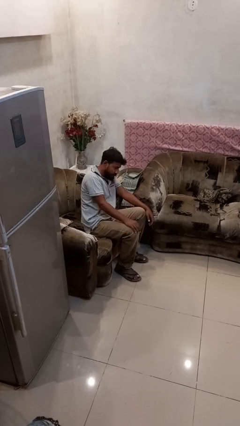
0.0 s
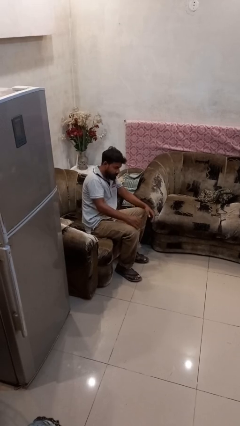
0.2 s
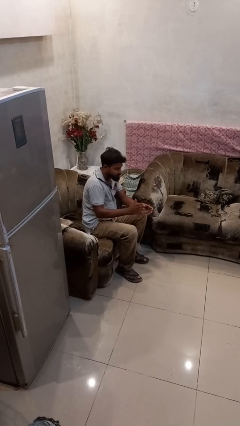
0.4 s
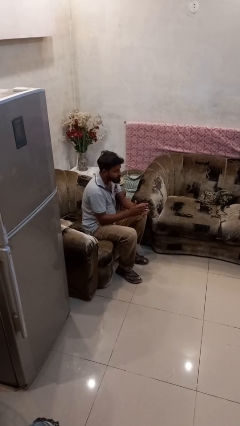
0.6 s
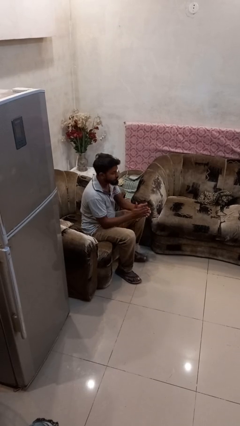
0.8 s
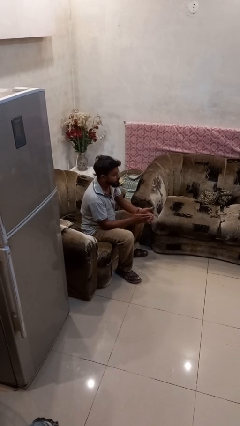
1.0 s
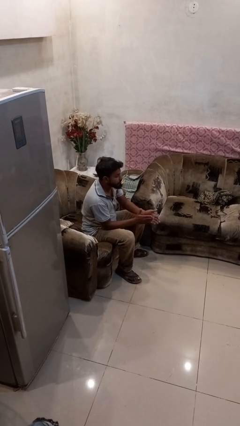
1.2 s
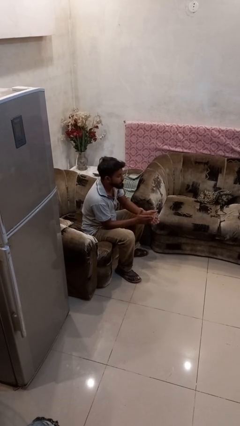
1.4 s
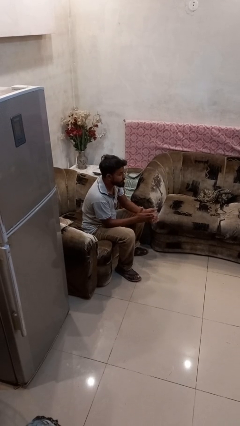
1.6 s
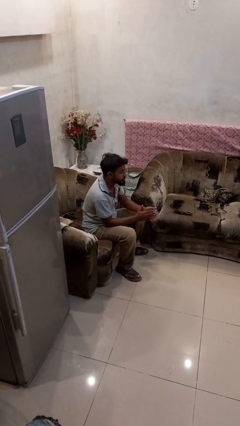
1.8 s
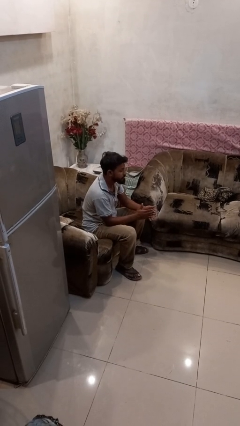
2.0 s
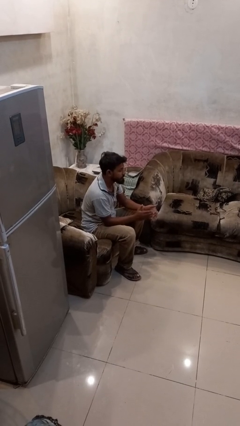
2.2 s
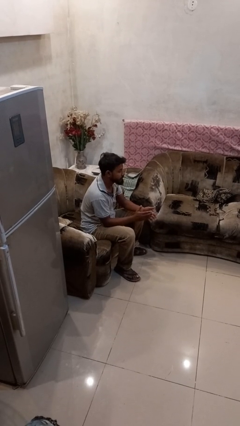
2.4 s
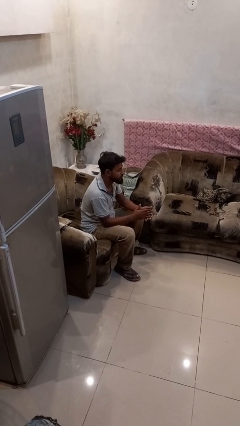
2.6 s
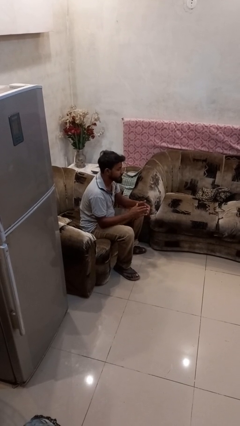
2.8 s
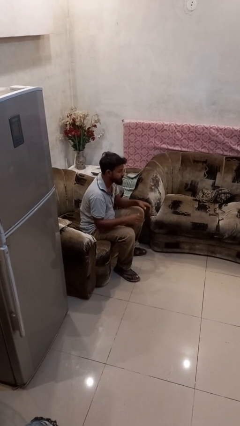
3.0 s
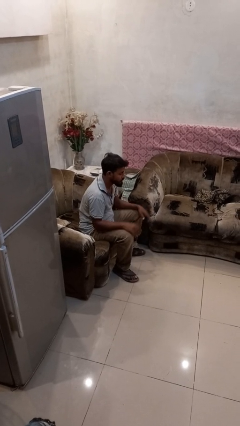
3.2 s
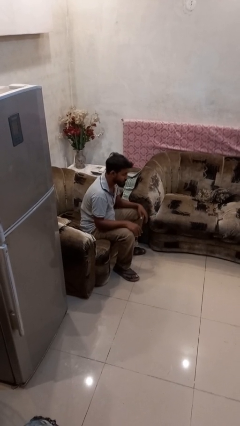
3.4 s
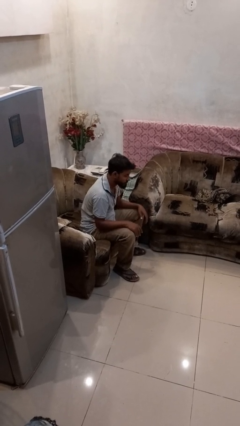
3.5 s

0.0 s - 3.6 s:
person claps hands

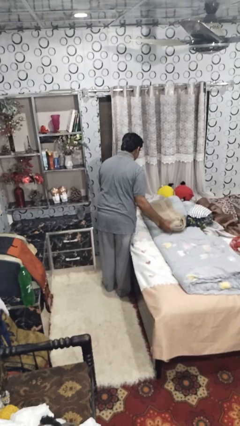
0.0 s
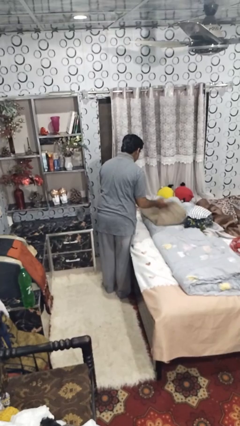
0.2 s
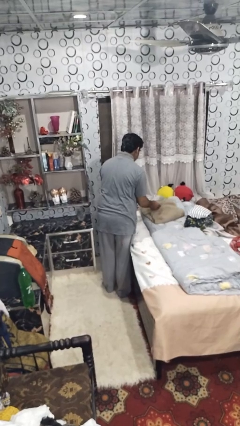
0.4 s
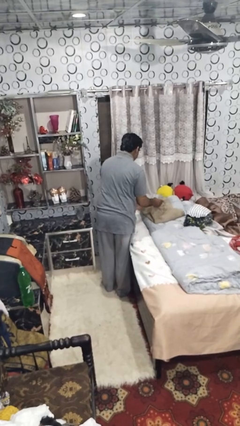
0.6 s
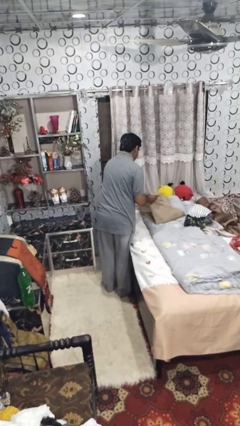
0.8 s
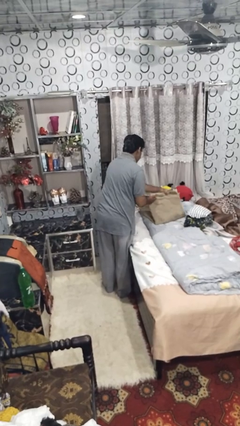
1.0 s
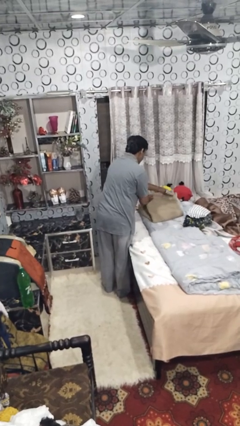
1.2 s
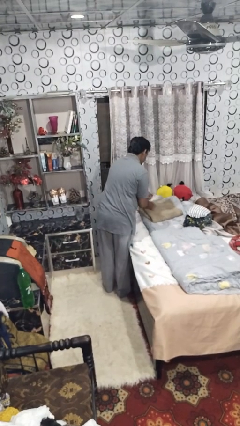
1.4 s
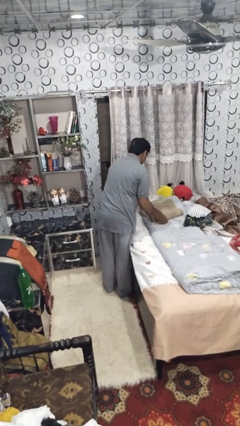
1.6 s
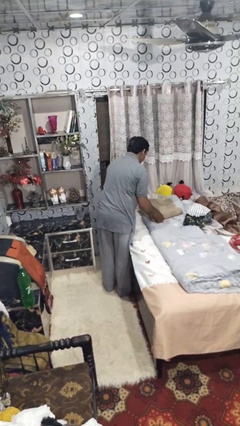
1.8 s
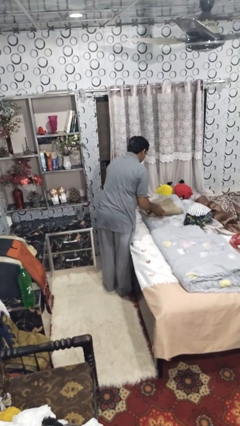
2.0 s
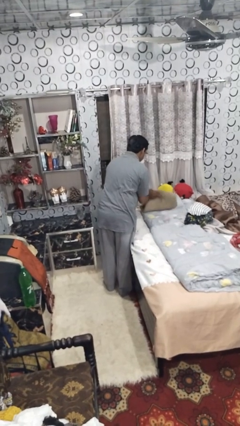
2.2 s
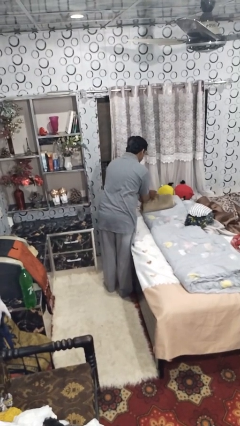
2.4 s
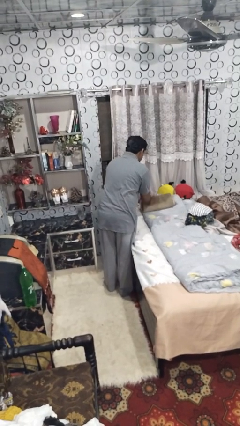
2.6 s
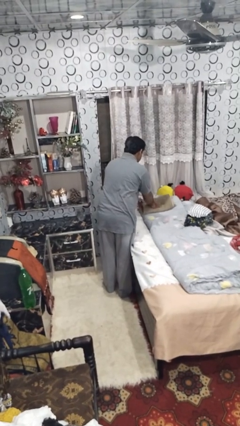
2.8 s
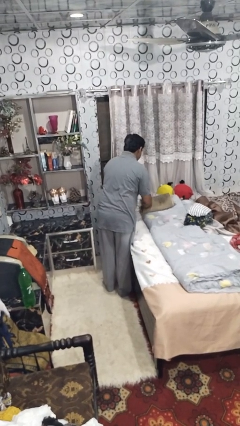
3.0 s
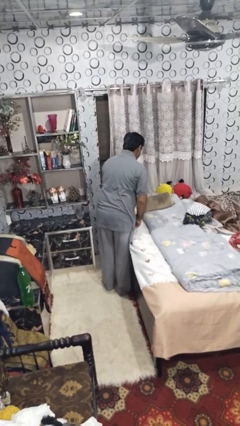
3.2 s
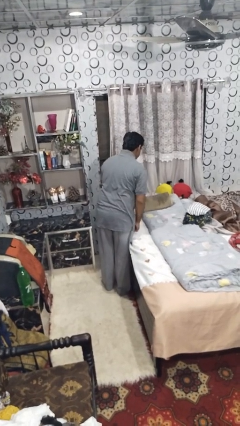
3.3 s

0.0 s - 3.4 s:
person folds towel

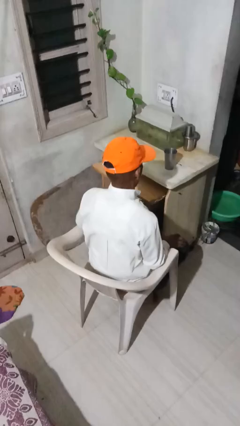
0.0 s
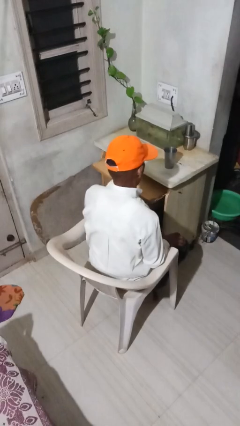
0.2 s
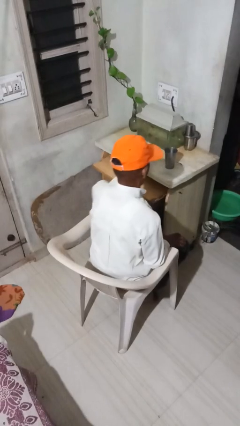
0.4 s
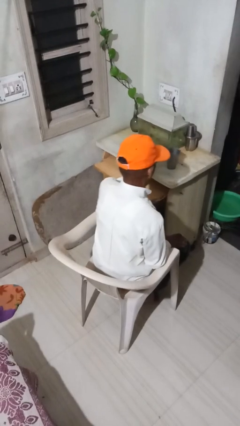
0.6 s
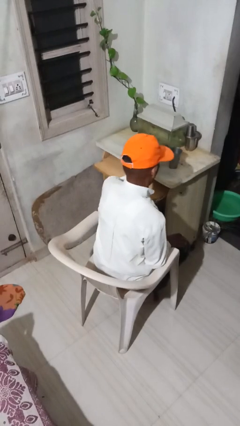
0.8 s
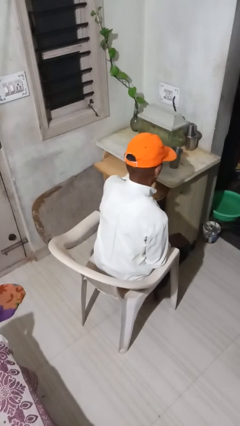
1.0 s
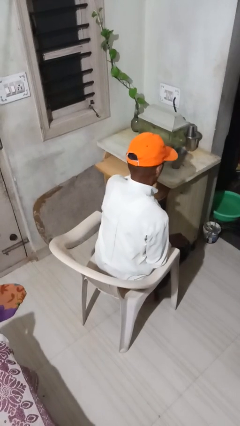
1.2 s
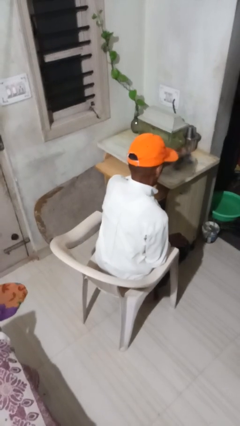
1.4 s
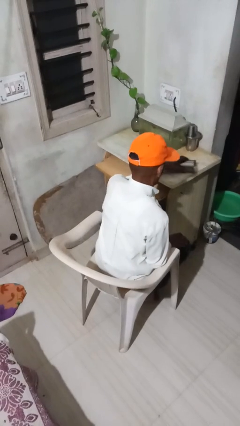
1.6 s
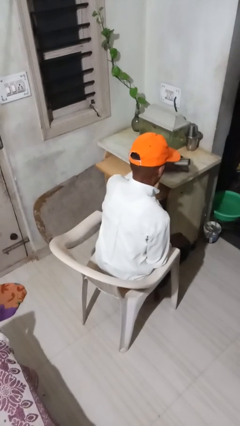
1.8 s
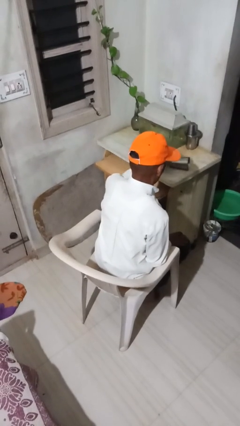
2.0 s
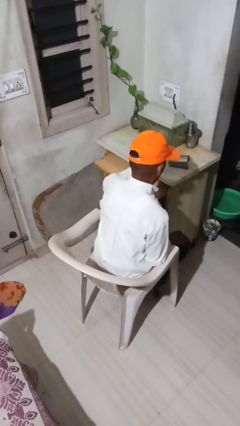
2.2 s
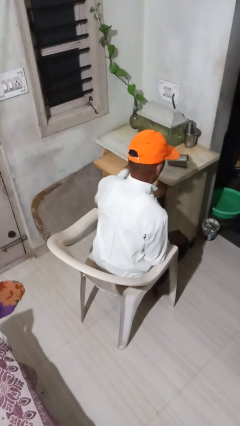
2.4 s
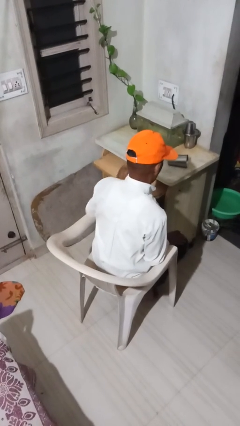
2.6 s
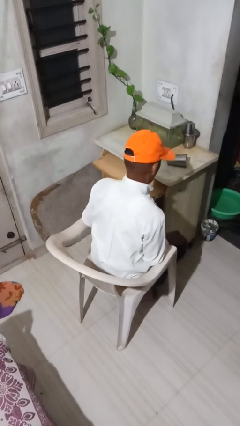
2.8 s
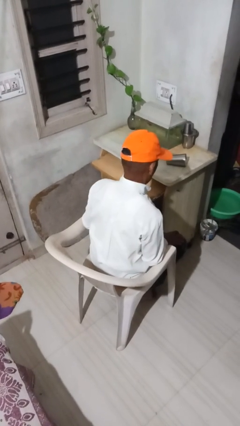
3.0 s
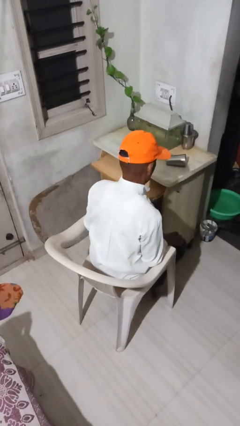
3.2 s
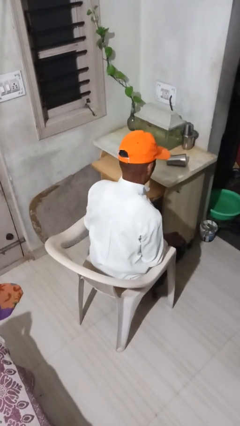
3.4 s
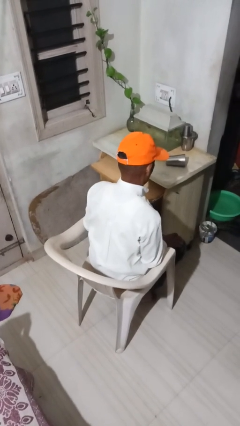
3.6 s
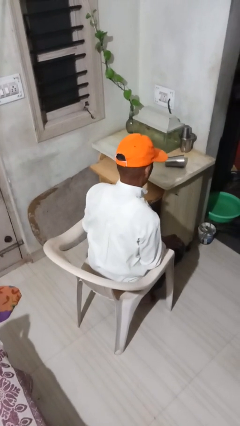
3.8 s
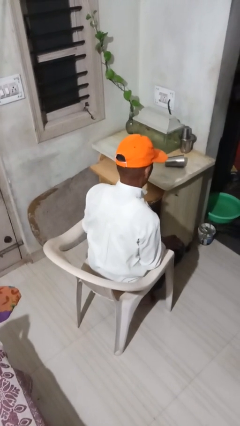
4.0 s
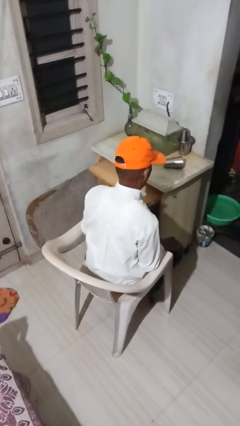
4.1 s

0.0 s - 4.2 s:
person spills on table

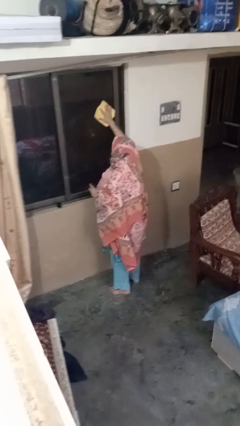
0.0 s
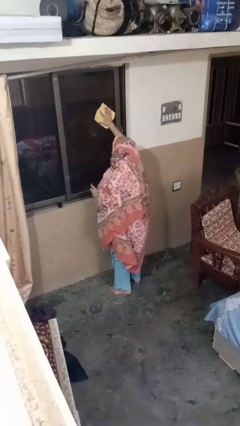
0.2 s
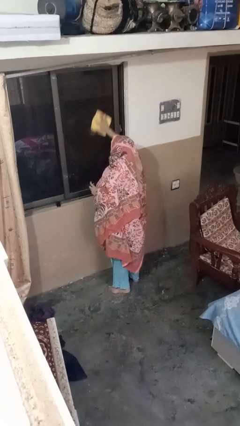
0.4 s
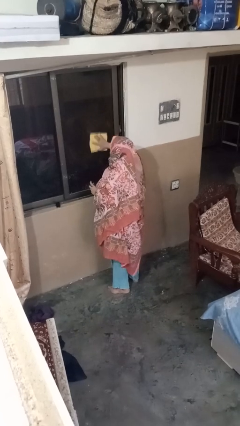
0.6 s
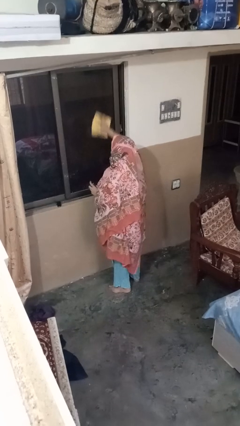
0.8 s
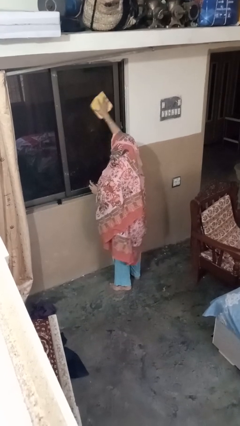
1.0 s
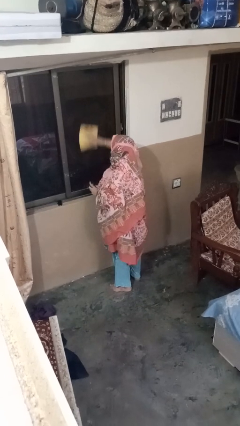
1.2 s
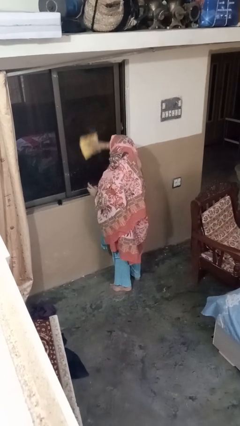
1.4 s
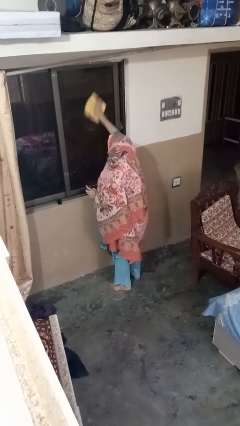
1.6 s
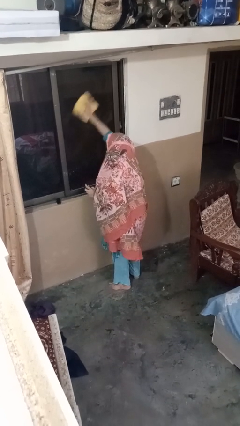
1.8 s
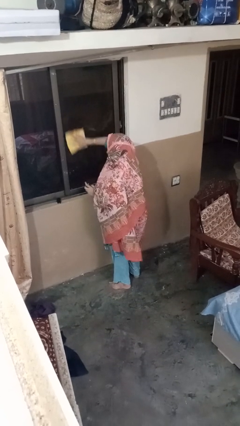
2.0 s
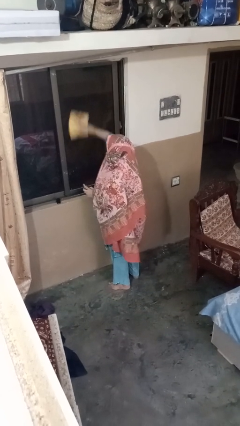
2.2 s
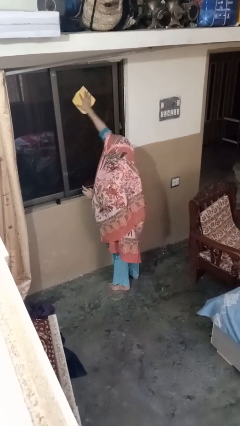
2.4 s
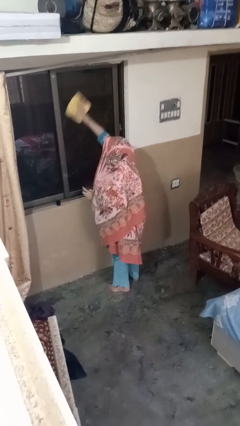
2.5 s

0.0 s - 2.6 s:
person washes window

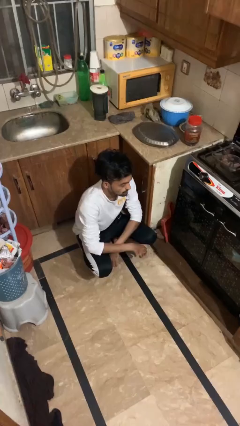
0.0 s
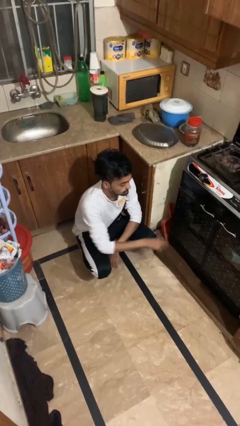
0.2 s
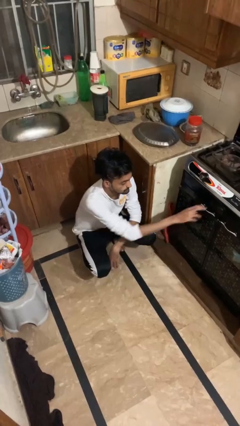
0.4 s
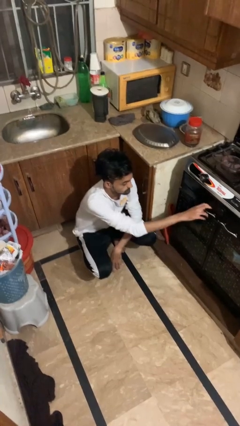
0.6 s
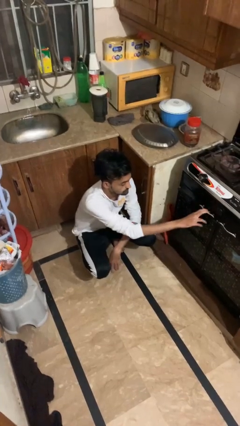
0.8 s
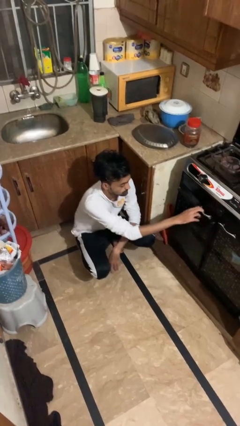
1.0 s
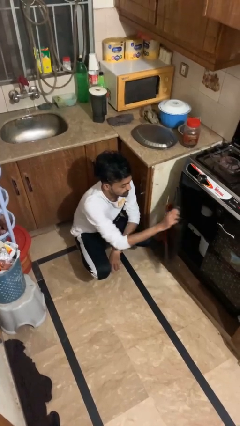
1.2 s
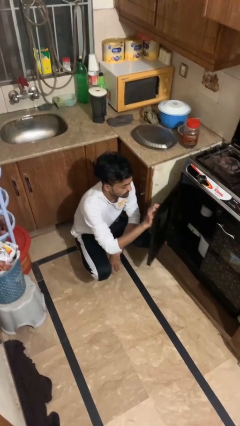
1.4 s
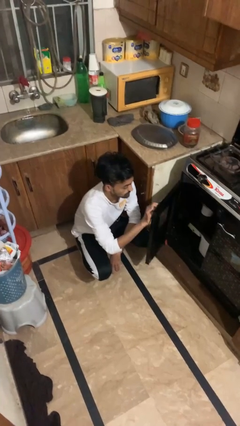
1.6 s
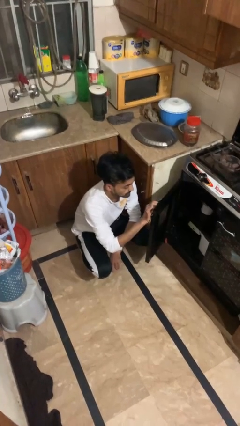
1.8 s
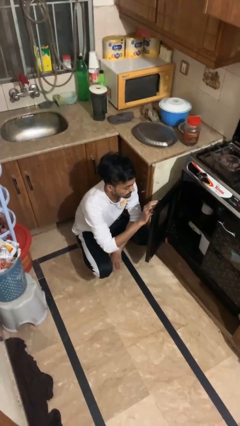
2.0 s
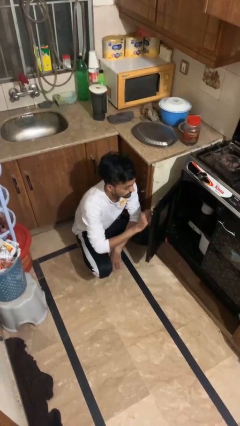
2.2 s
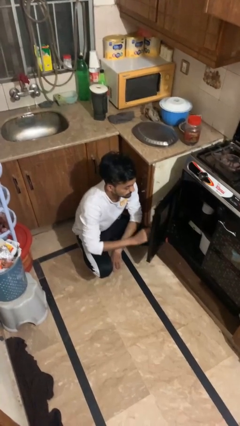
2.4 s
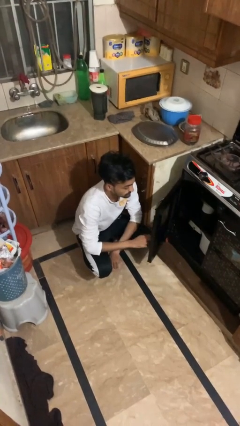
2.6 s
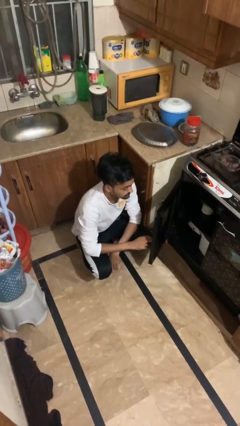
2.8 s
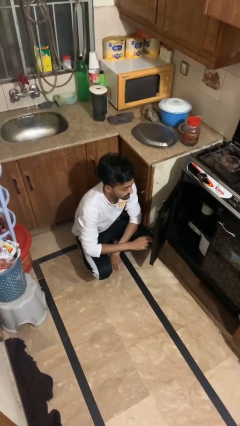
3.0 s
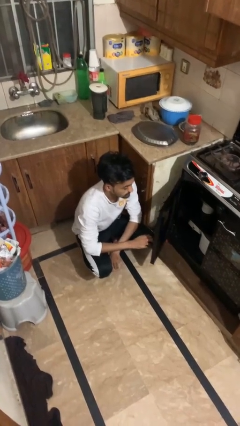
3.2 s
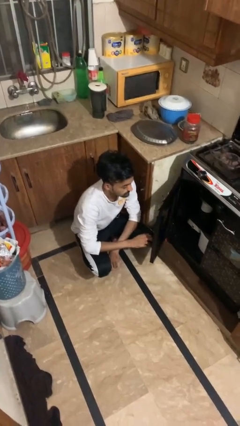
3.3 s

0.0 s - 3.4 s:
person opens oven door

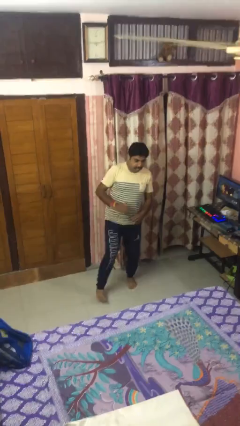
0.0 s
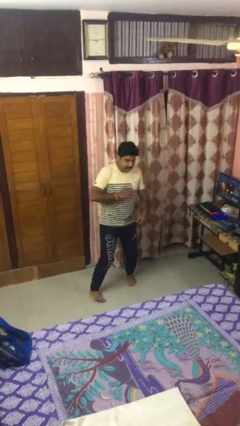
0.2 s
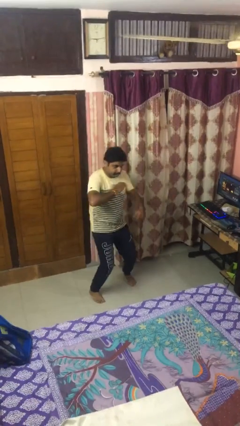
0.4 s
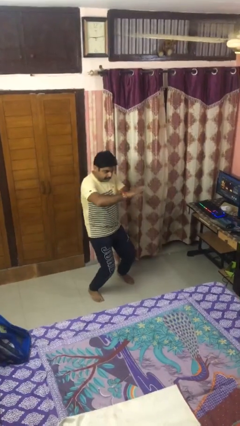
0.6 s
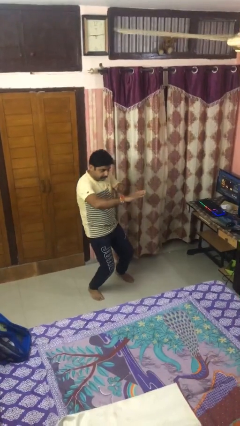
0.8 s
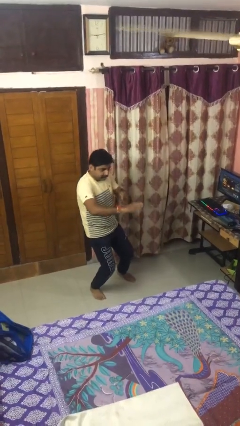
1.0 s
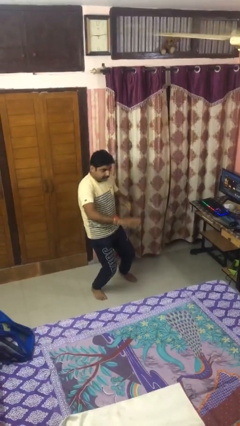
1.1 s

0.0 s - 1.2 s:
person karate chop
